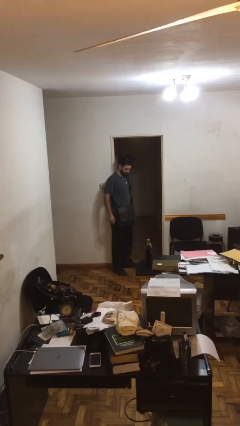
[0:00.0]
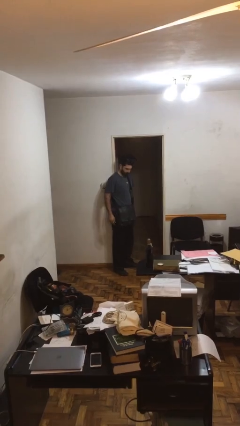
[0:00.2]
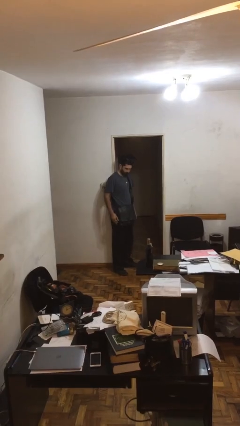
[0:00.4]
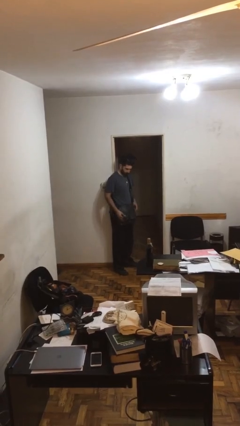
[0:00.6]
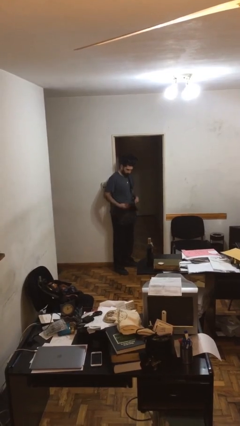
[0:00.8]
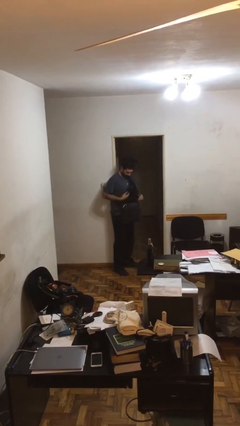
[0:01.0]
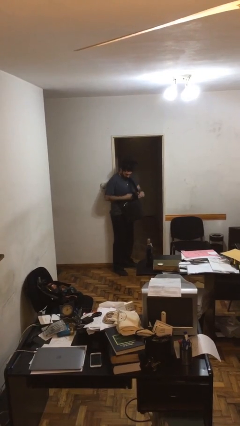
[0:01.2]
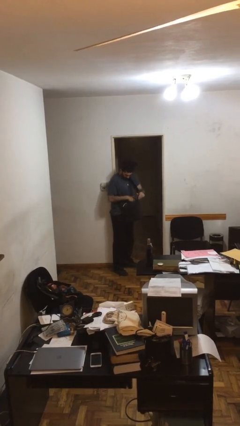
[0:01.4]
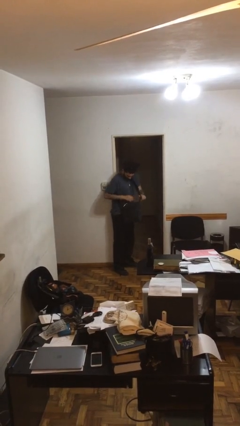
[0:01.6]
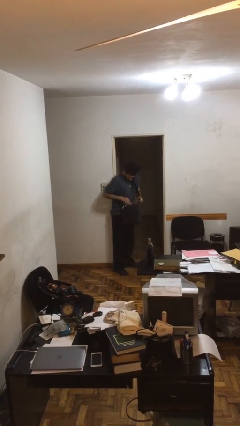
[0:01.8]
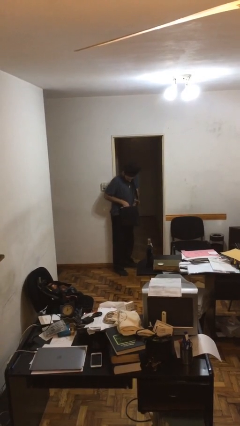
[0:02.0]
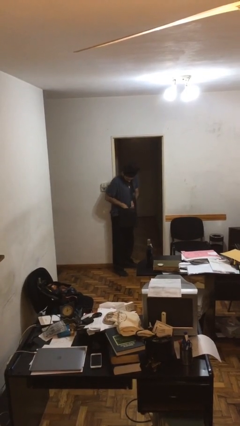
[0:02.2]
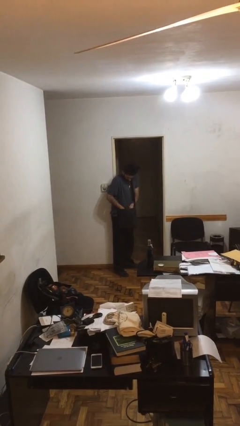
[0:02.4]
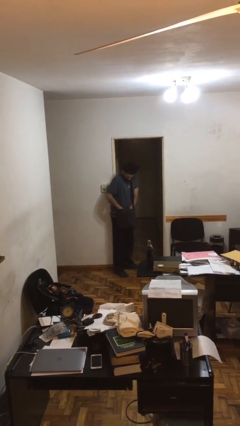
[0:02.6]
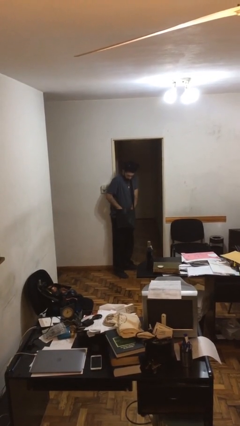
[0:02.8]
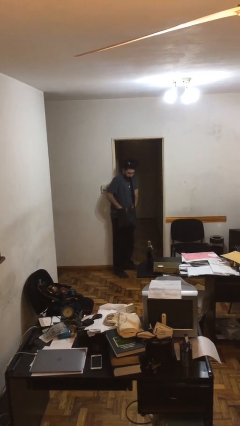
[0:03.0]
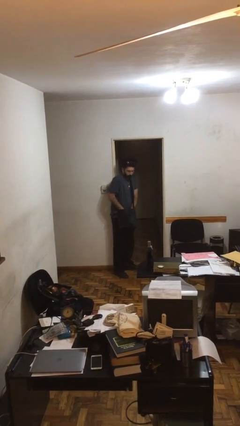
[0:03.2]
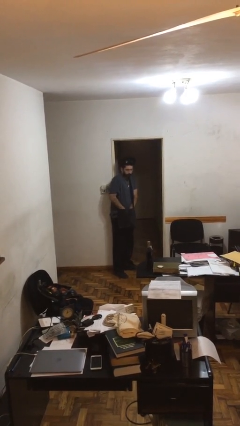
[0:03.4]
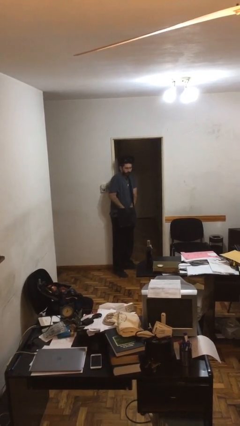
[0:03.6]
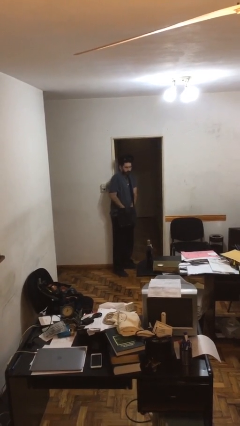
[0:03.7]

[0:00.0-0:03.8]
person searches in purse

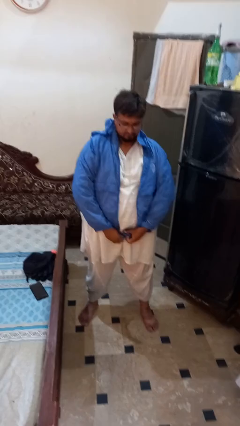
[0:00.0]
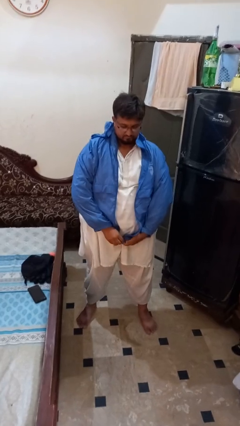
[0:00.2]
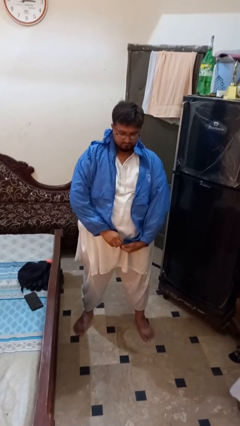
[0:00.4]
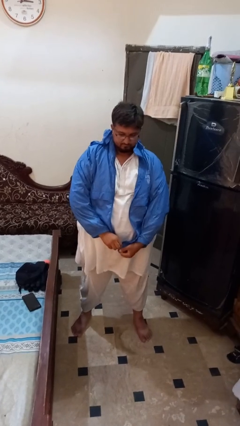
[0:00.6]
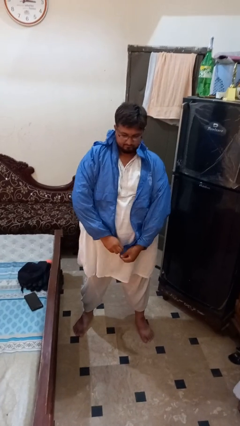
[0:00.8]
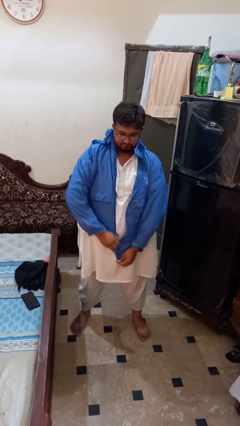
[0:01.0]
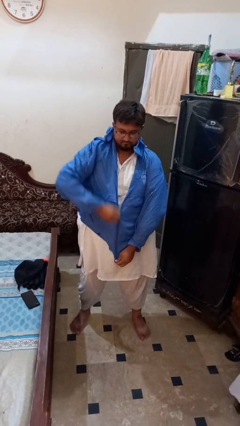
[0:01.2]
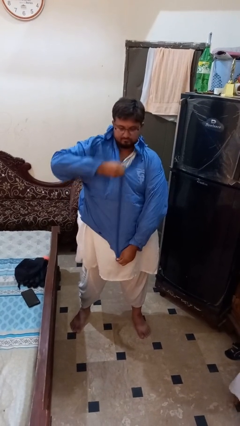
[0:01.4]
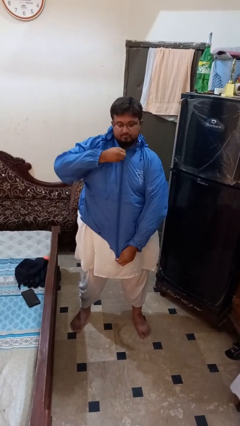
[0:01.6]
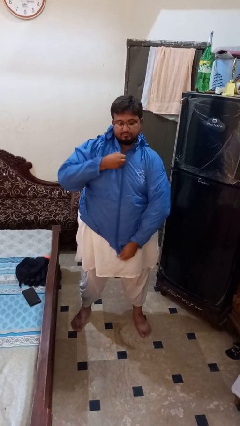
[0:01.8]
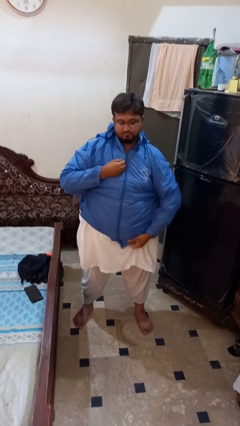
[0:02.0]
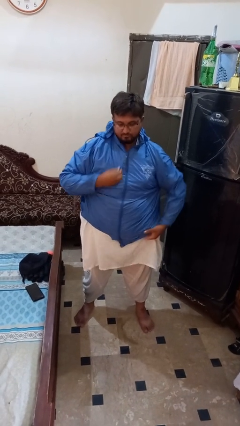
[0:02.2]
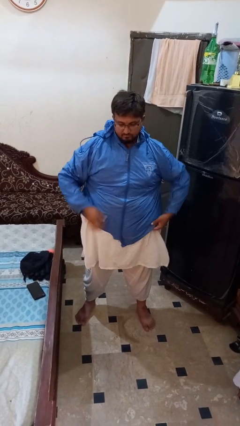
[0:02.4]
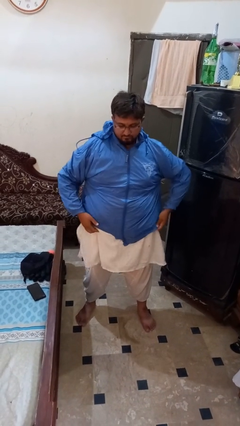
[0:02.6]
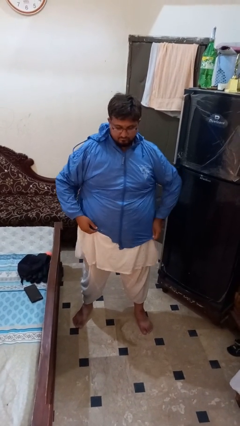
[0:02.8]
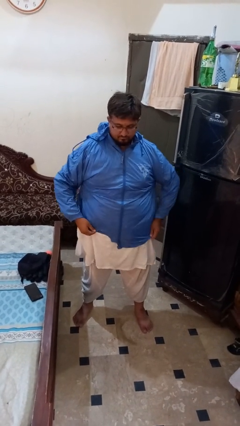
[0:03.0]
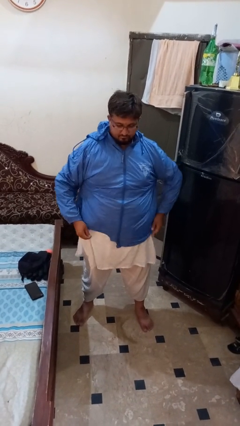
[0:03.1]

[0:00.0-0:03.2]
person zips up jacket

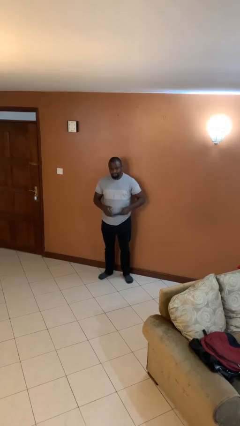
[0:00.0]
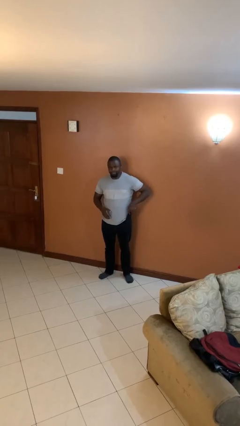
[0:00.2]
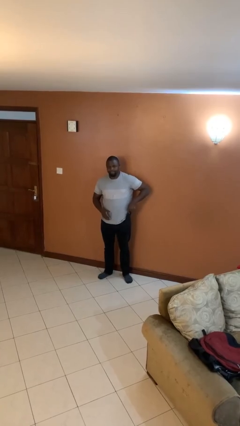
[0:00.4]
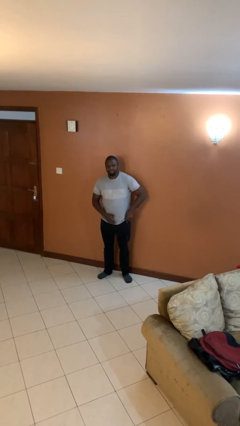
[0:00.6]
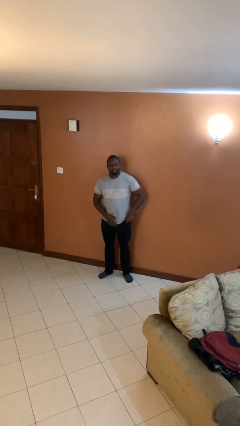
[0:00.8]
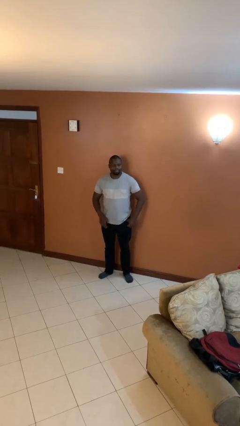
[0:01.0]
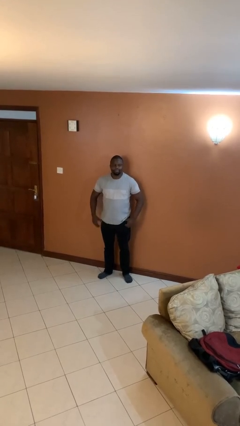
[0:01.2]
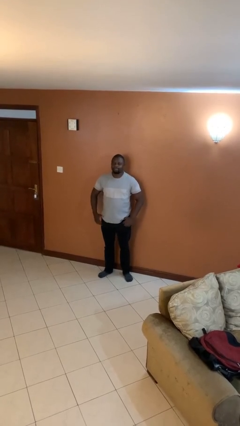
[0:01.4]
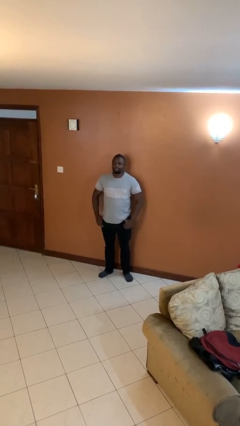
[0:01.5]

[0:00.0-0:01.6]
person puts phone into pocket

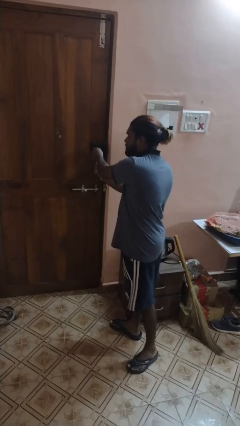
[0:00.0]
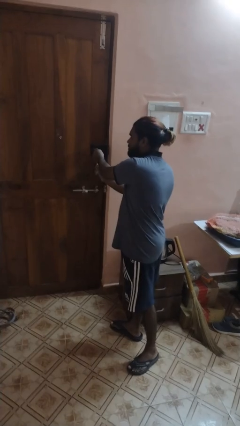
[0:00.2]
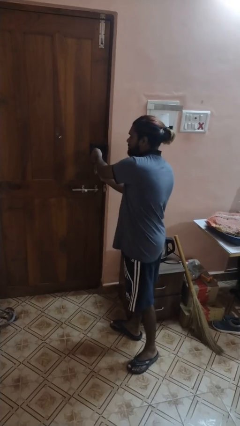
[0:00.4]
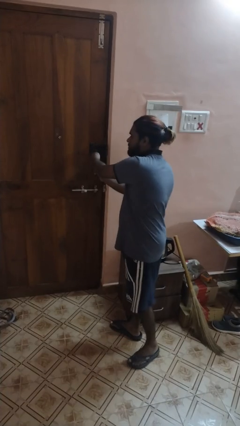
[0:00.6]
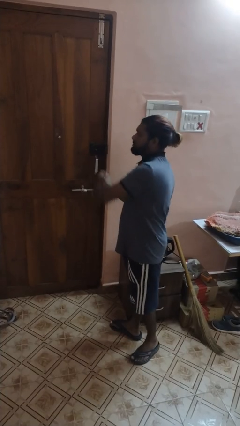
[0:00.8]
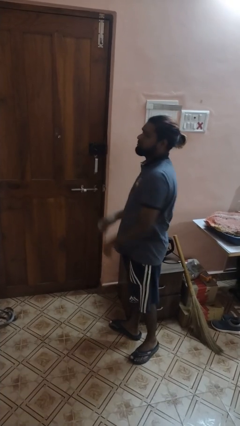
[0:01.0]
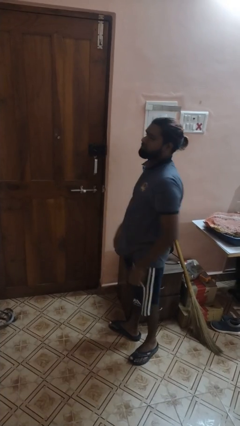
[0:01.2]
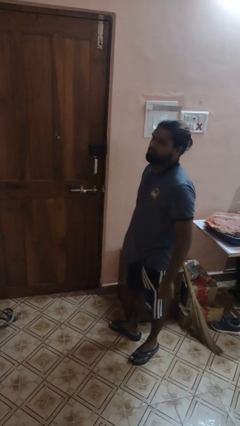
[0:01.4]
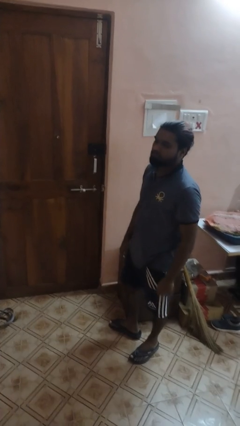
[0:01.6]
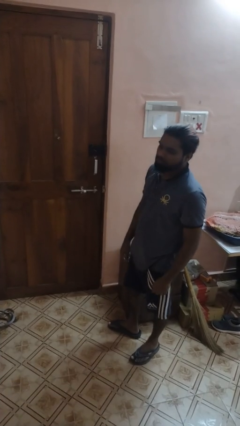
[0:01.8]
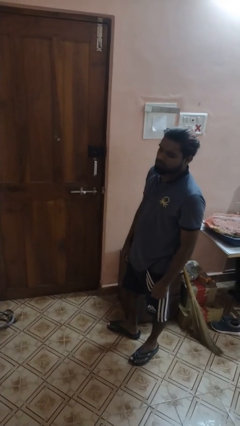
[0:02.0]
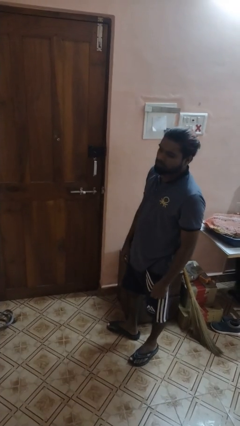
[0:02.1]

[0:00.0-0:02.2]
person locks door with keys

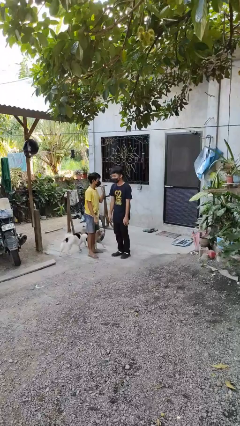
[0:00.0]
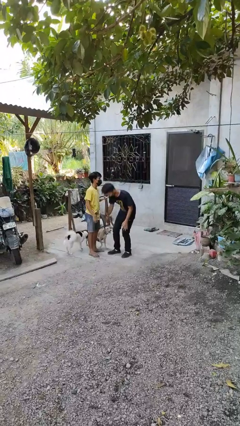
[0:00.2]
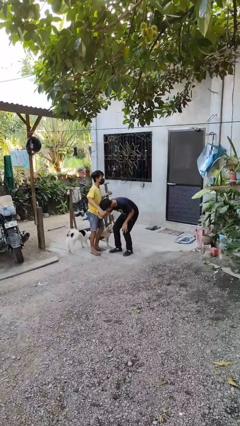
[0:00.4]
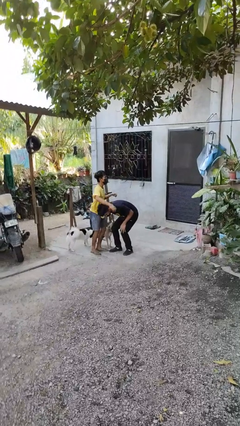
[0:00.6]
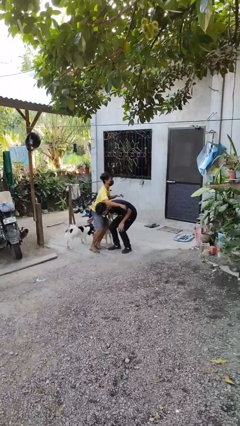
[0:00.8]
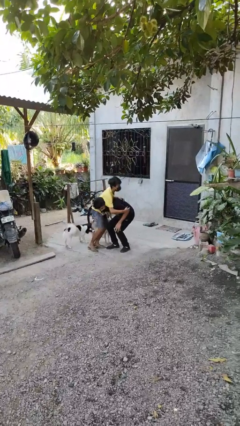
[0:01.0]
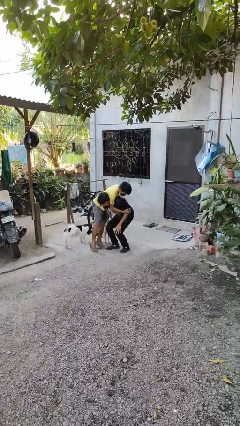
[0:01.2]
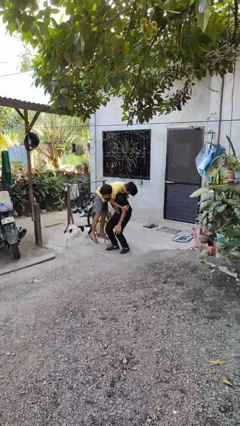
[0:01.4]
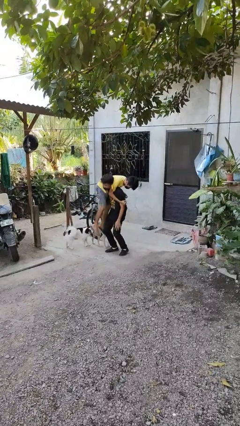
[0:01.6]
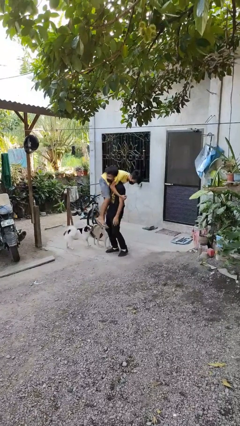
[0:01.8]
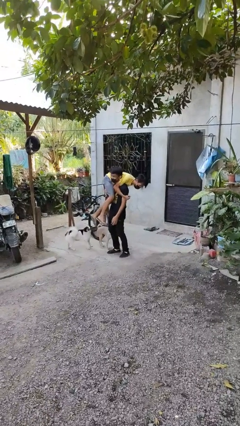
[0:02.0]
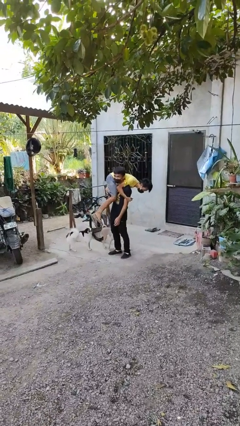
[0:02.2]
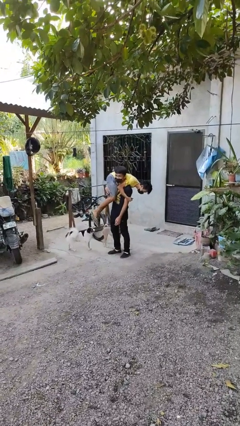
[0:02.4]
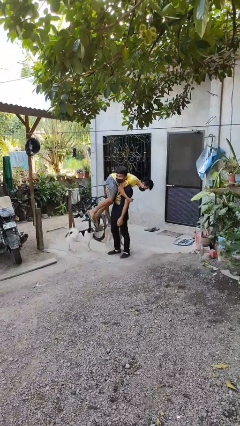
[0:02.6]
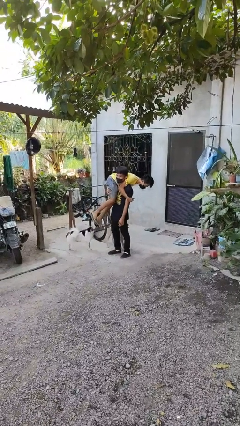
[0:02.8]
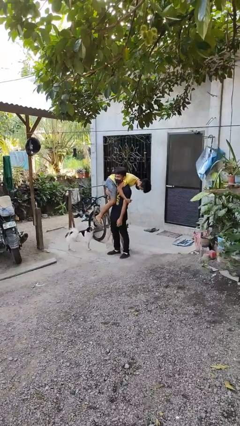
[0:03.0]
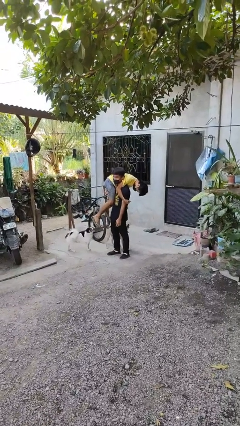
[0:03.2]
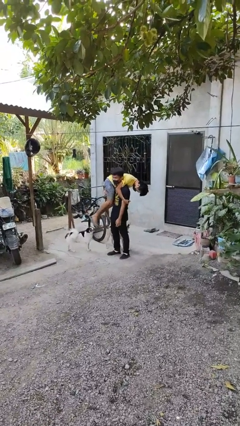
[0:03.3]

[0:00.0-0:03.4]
person carries person over shoulder

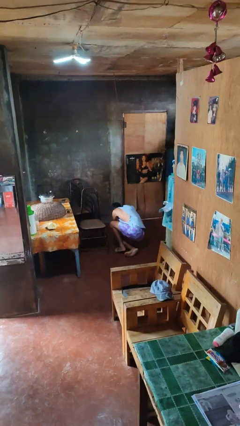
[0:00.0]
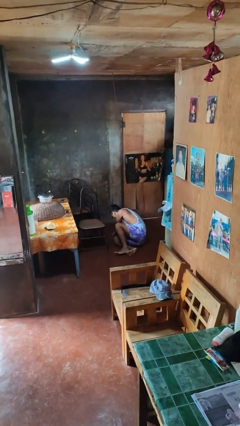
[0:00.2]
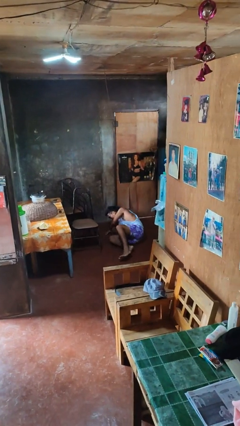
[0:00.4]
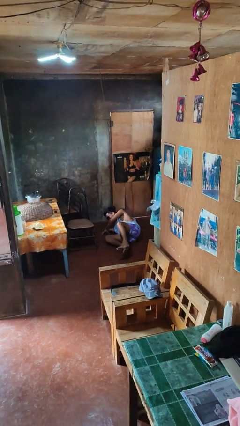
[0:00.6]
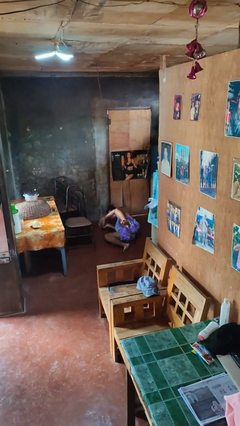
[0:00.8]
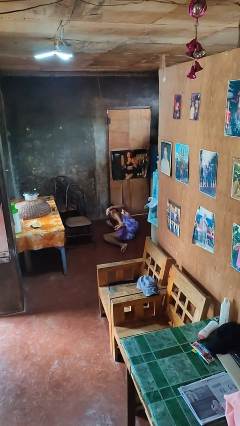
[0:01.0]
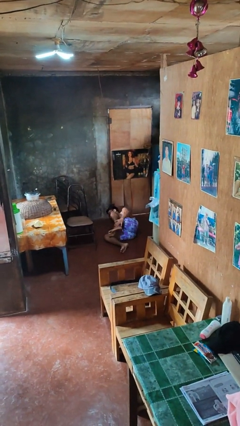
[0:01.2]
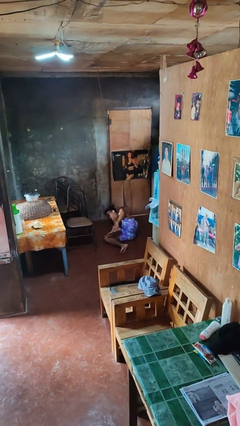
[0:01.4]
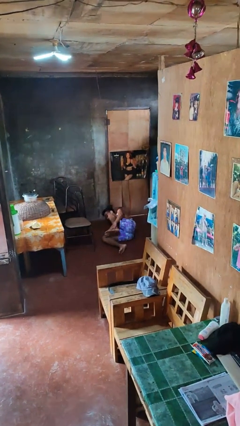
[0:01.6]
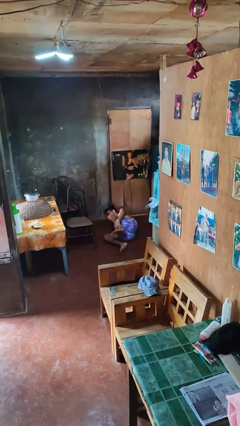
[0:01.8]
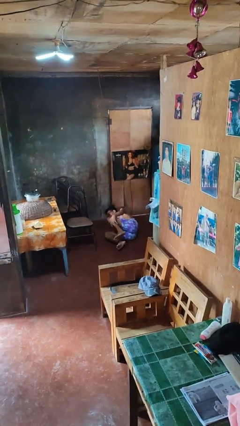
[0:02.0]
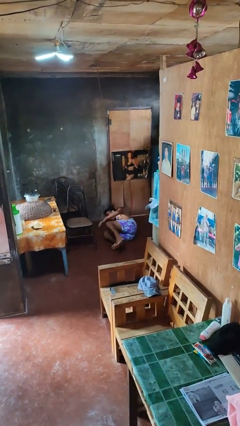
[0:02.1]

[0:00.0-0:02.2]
person lies down on floor

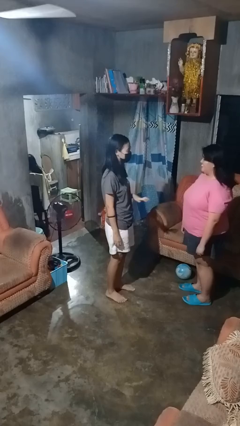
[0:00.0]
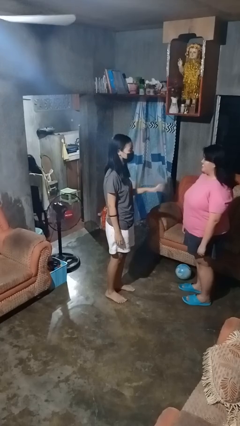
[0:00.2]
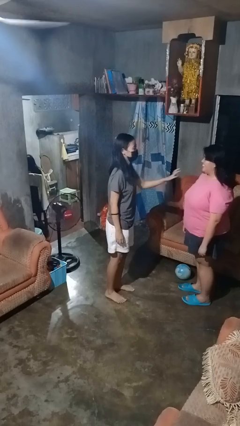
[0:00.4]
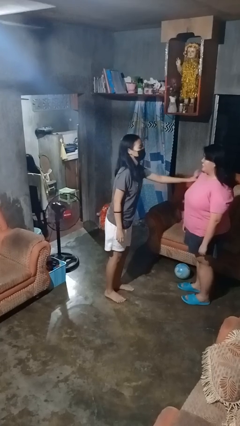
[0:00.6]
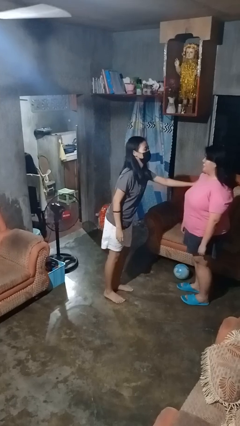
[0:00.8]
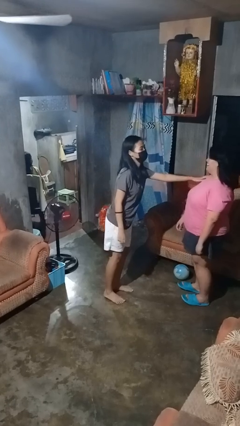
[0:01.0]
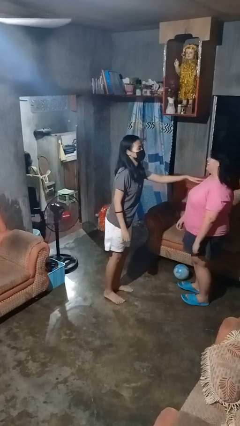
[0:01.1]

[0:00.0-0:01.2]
person shoves person
